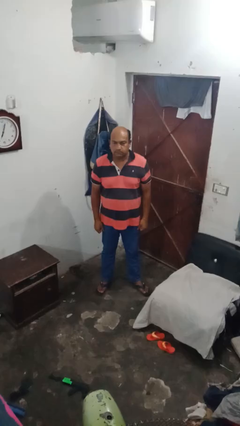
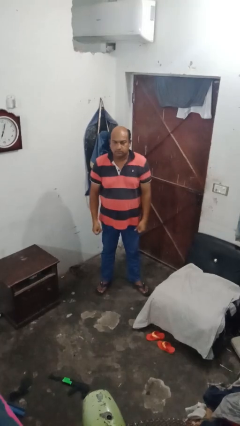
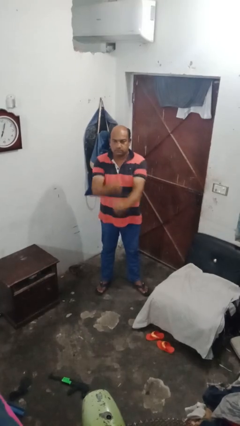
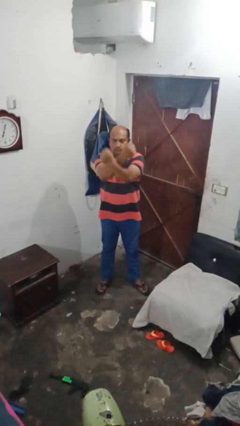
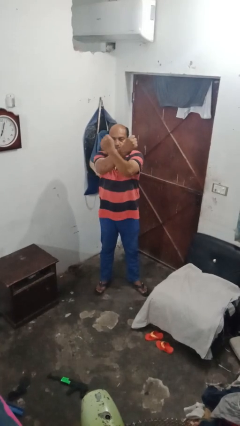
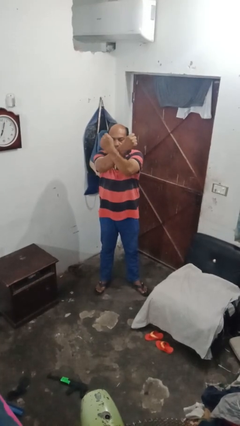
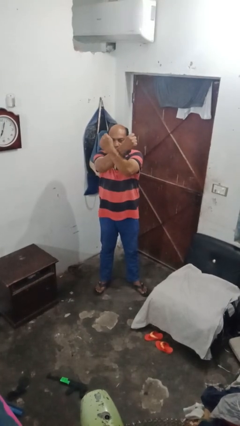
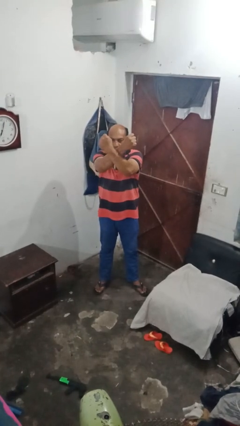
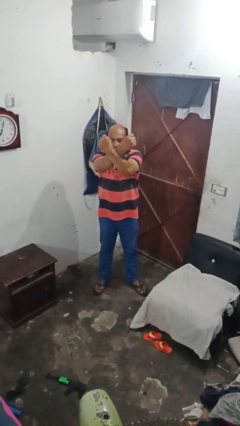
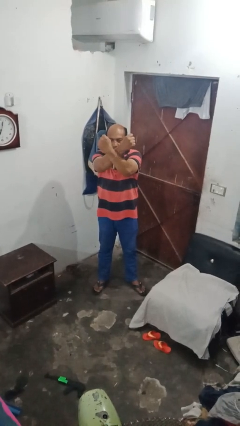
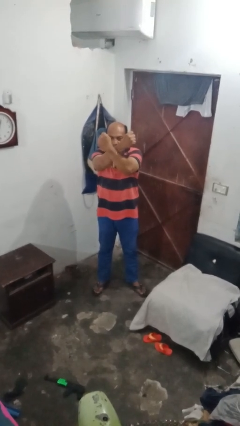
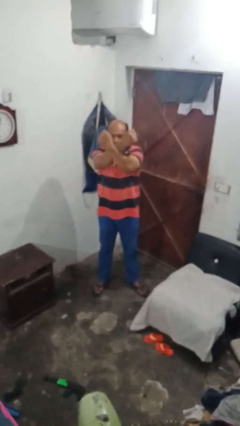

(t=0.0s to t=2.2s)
person gestures arms x

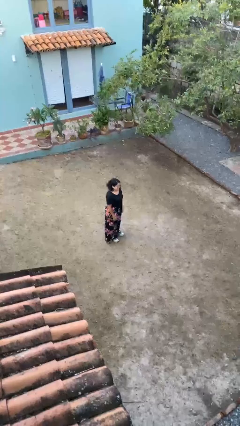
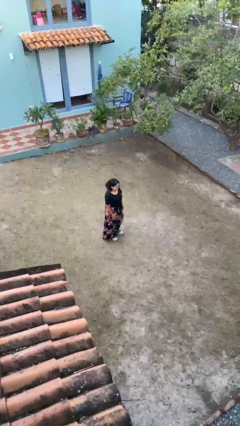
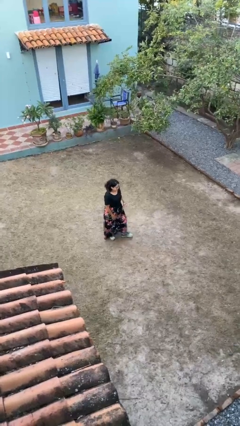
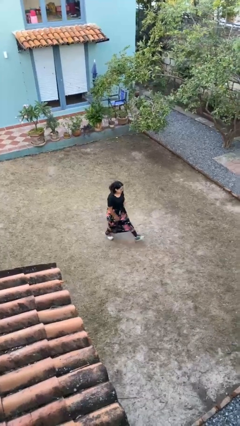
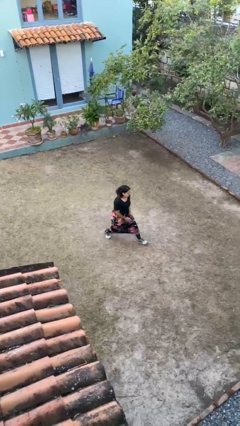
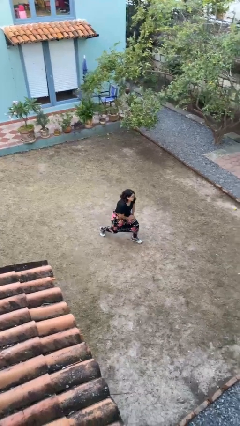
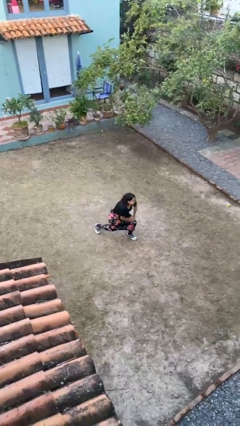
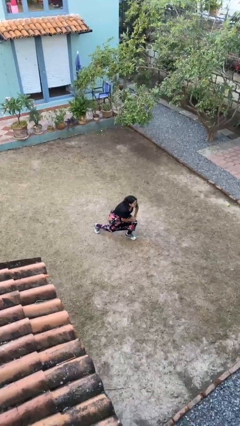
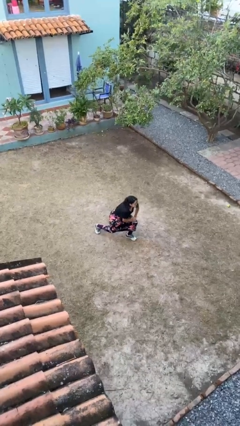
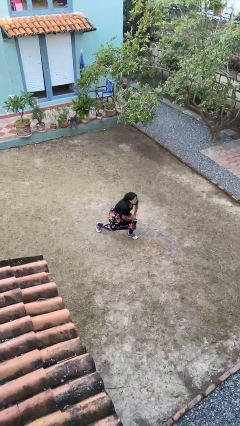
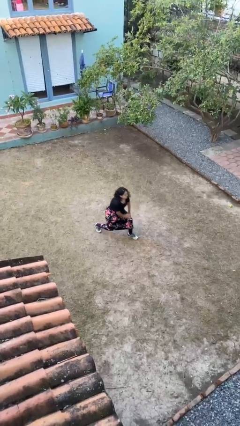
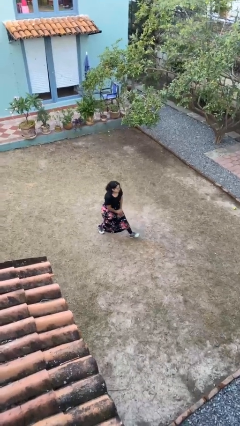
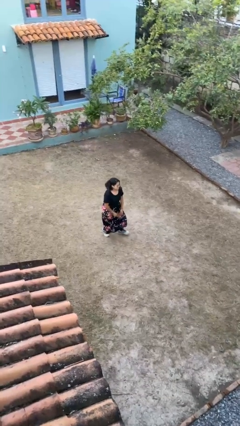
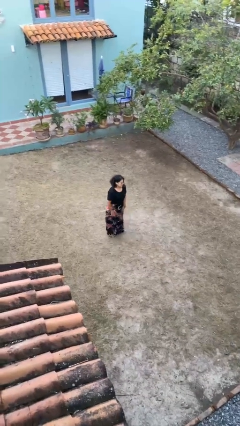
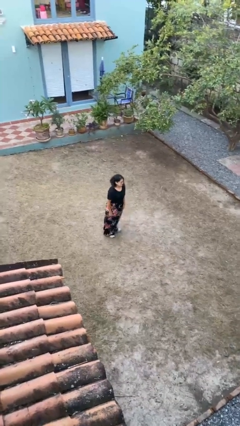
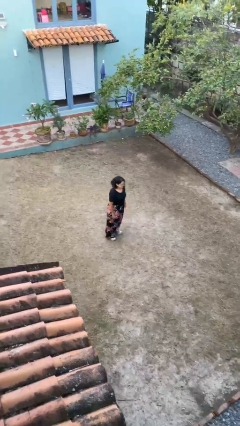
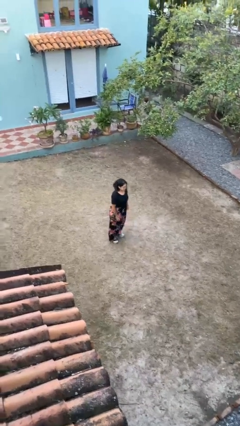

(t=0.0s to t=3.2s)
person exercises with lunges

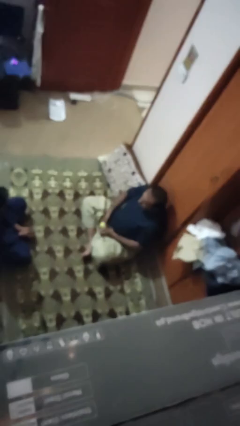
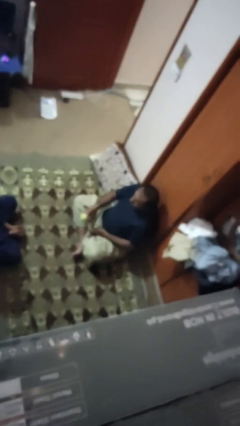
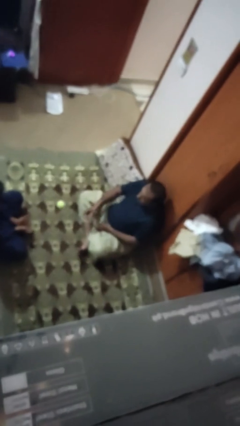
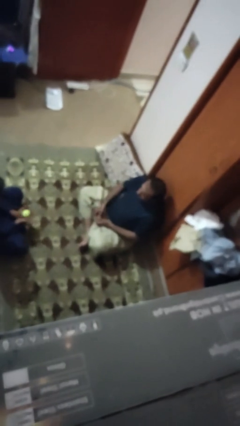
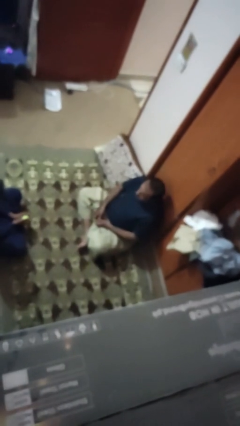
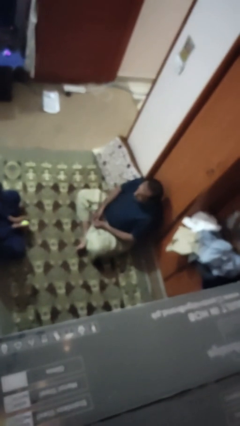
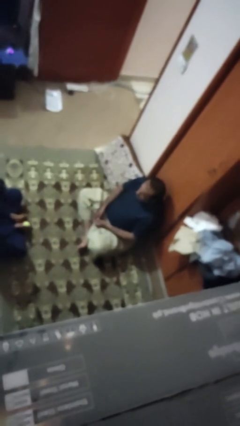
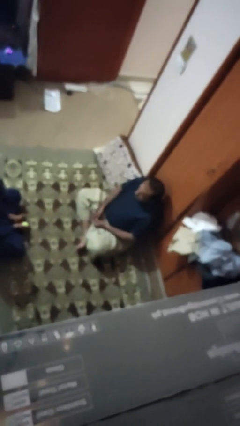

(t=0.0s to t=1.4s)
person throws object to person

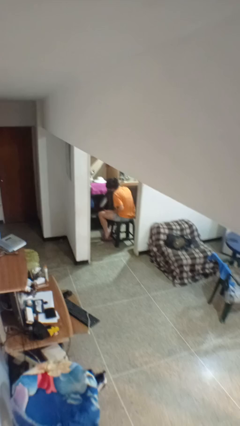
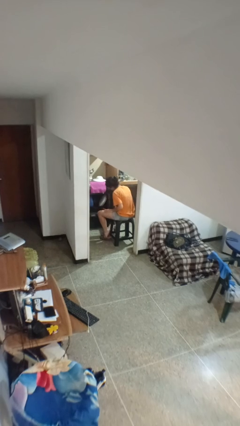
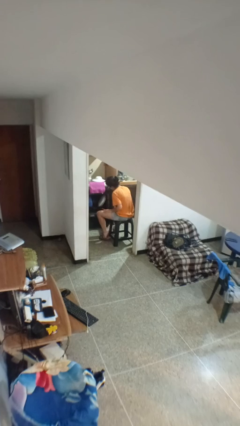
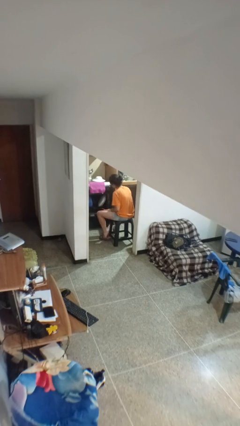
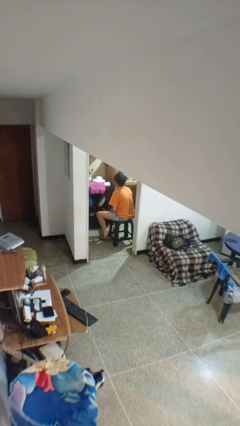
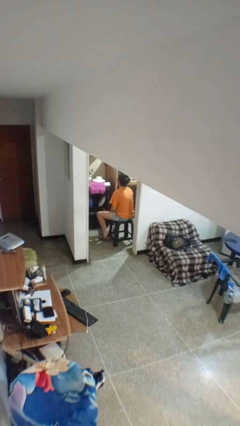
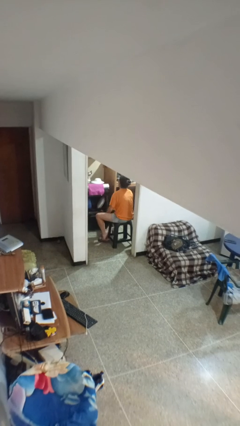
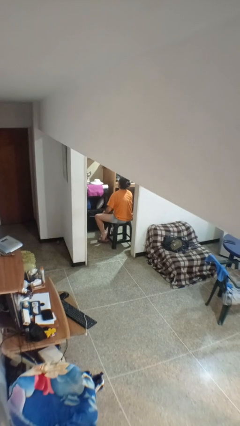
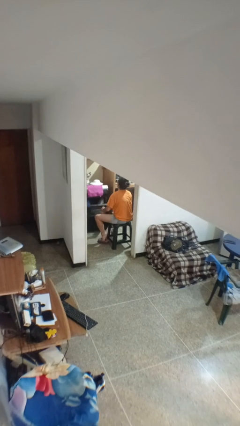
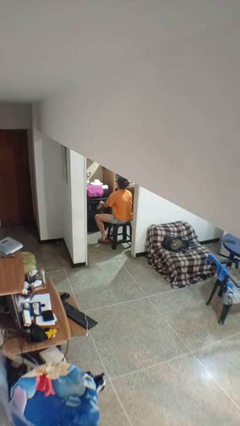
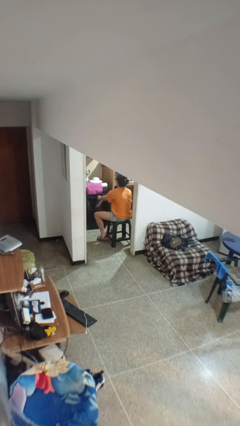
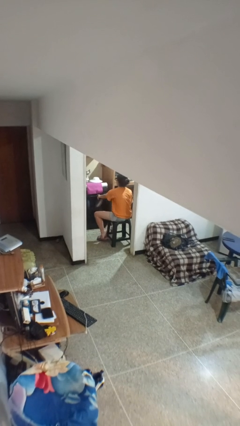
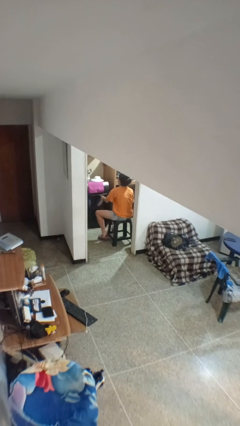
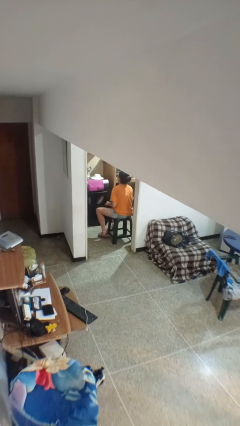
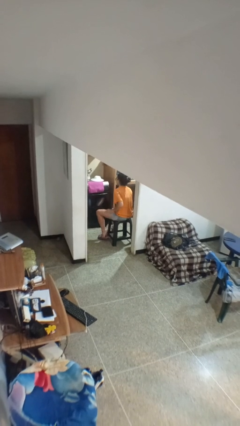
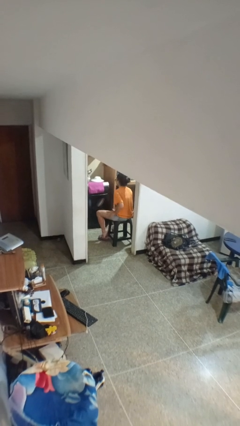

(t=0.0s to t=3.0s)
person closes dishwasher

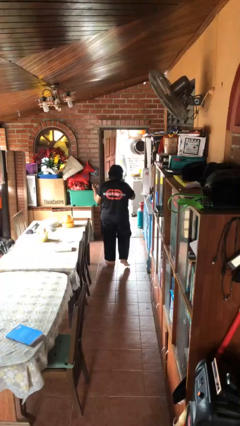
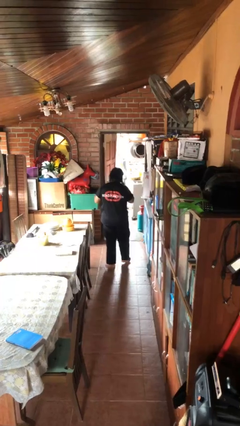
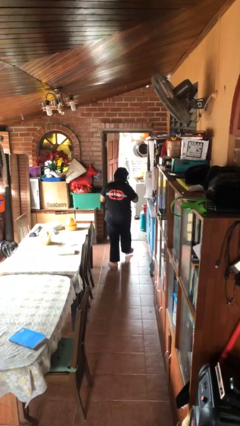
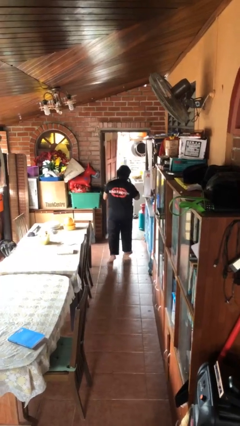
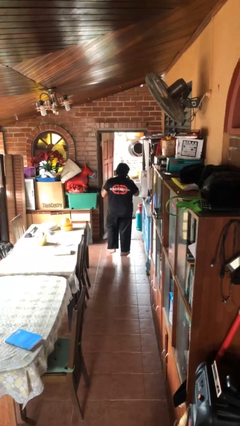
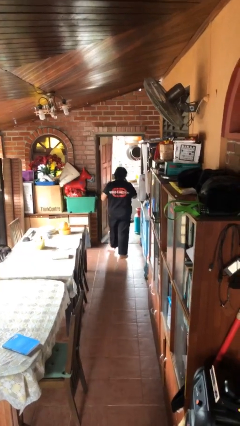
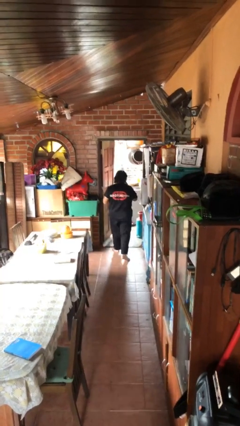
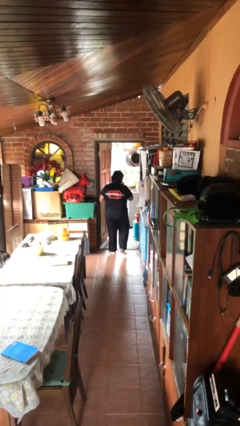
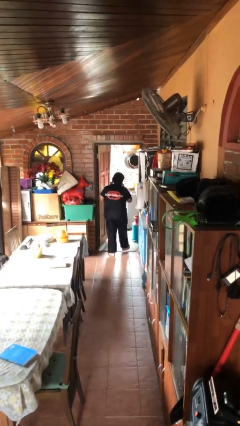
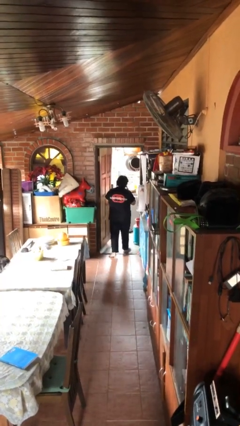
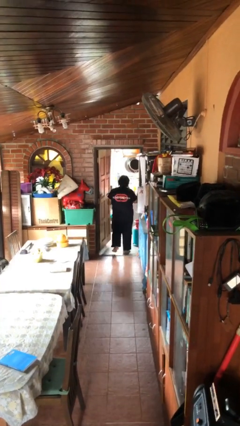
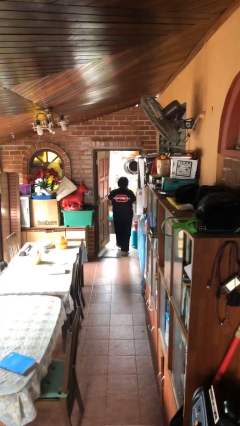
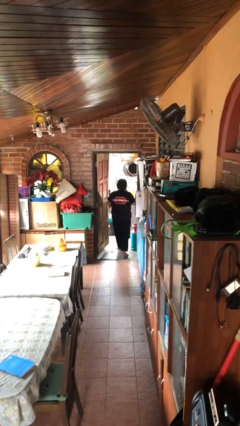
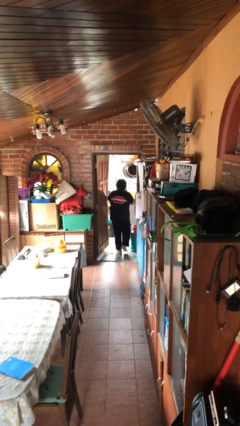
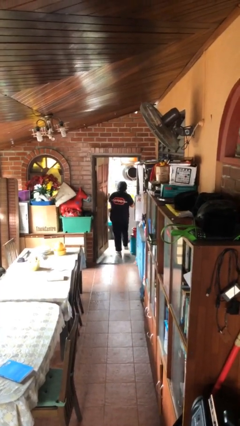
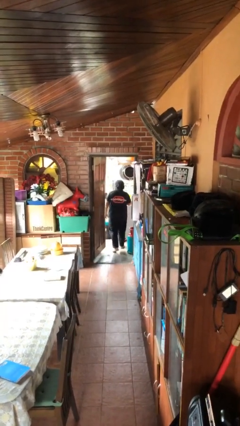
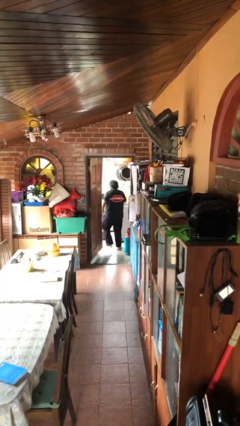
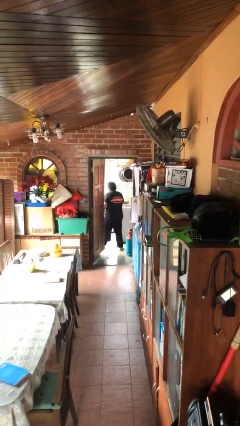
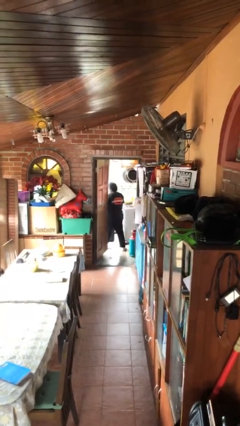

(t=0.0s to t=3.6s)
person exits scene through structure

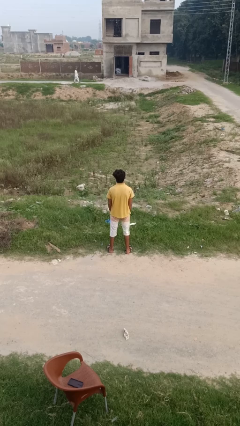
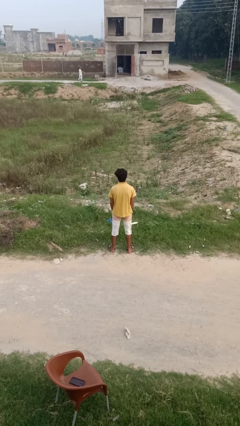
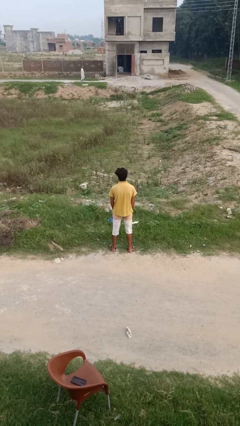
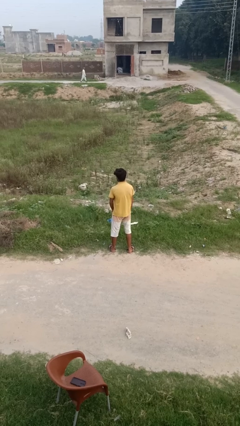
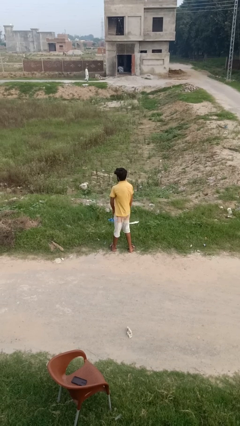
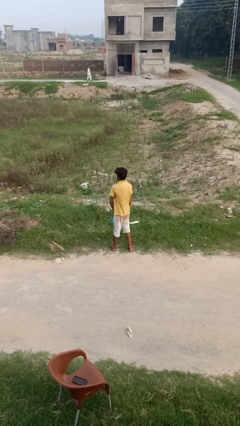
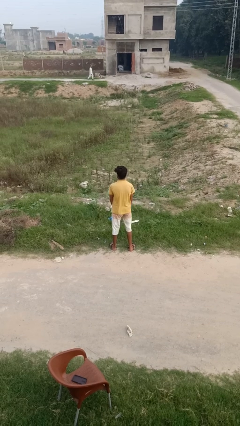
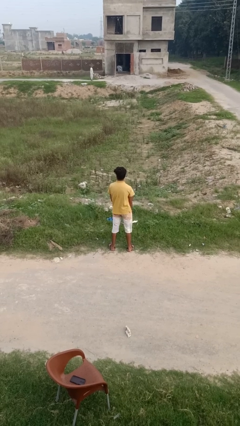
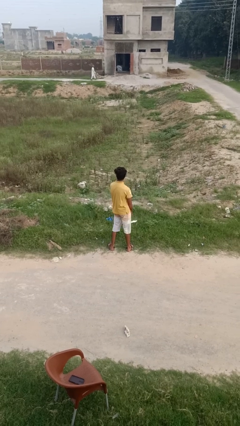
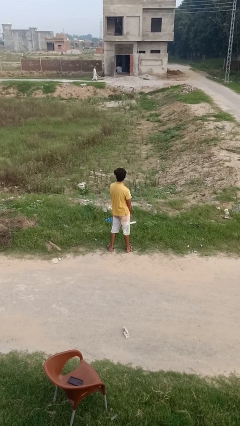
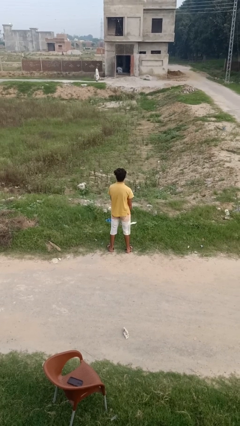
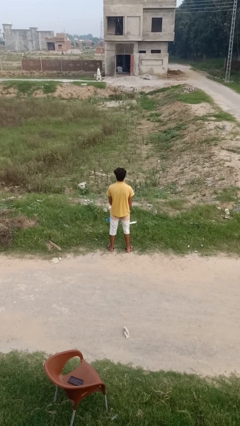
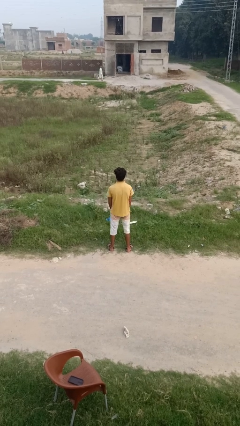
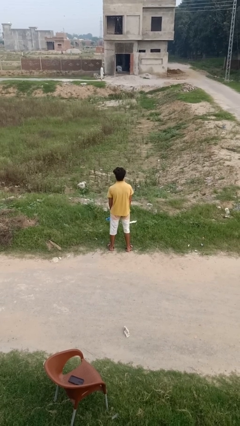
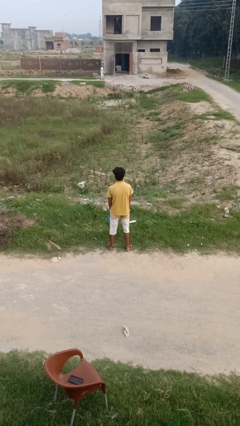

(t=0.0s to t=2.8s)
person twirls

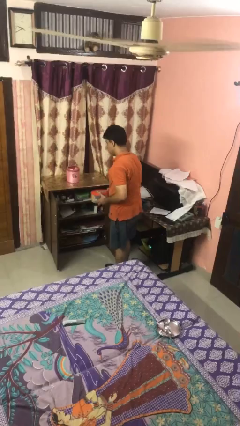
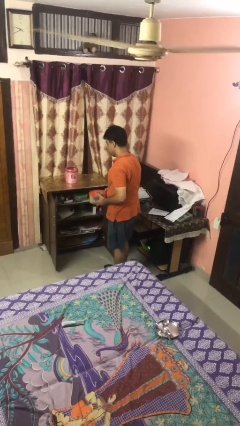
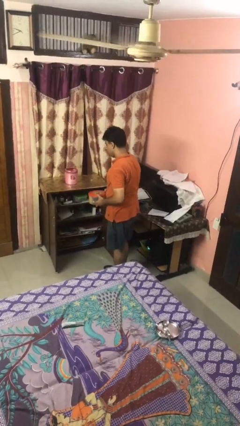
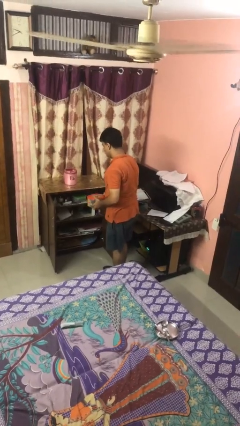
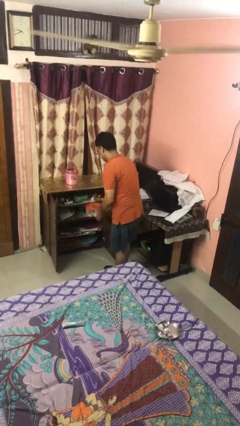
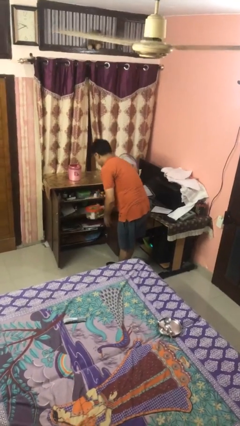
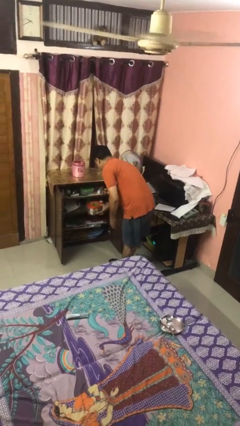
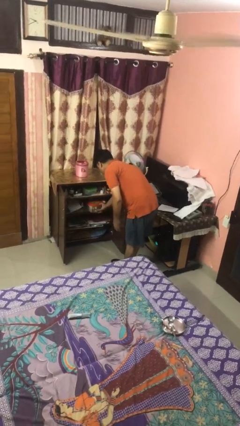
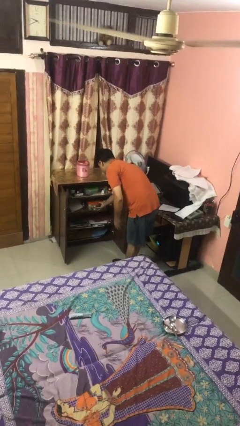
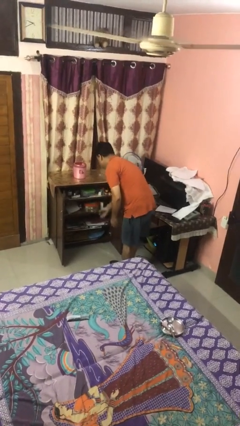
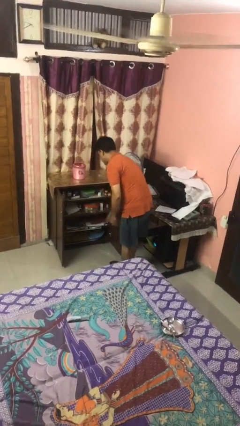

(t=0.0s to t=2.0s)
person puts down object into cabinet
